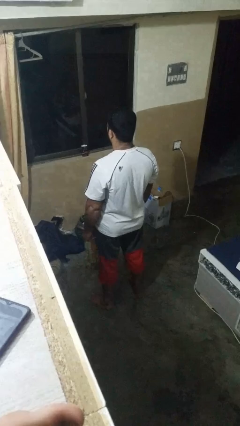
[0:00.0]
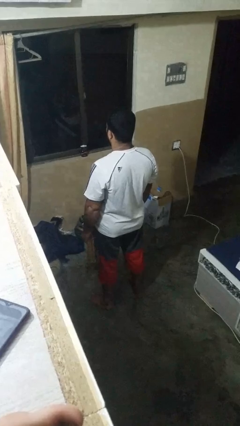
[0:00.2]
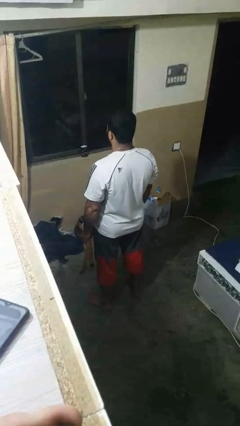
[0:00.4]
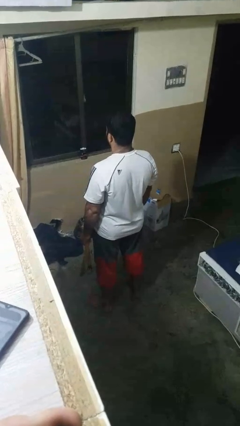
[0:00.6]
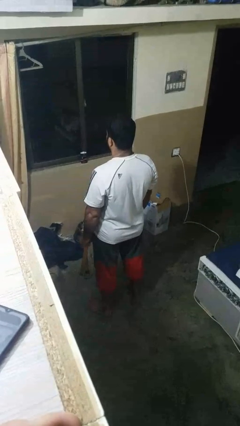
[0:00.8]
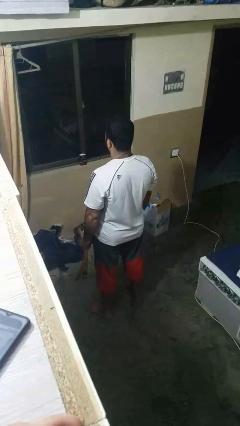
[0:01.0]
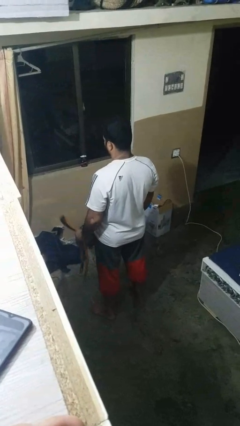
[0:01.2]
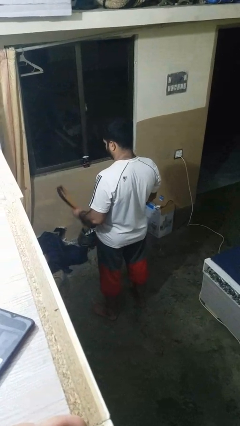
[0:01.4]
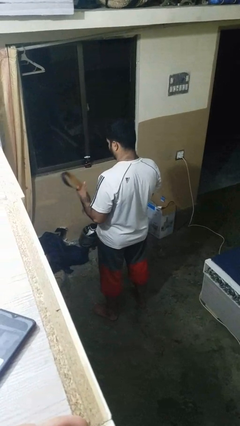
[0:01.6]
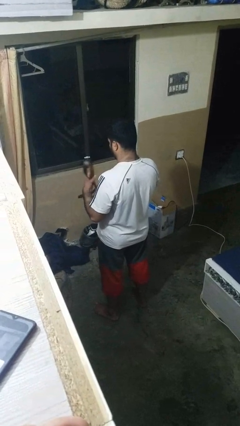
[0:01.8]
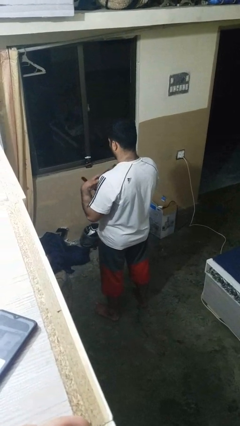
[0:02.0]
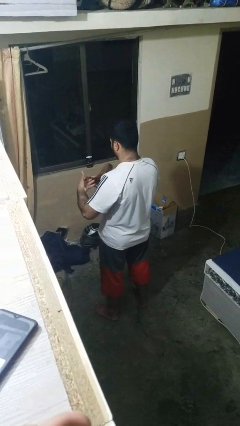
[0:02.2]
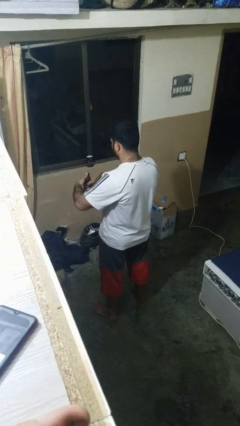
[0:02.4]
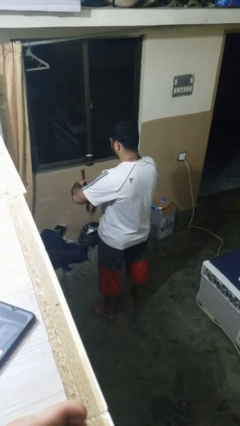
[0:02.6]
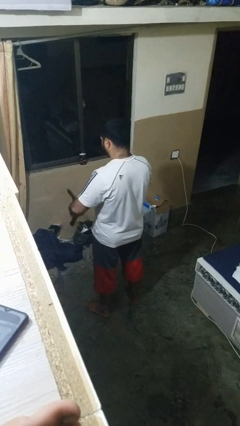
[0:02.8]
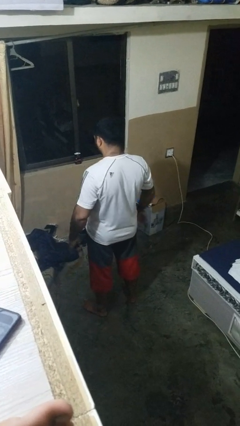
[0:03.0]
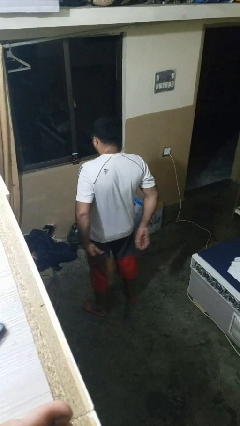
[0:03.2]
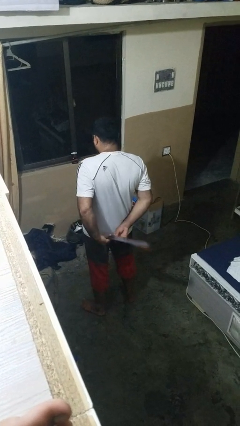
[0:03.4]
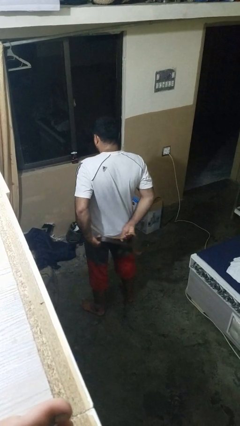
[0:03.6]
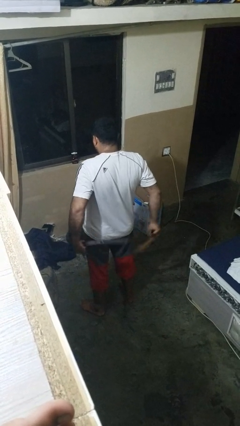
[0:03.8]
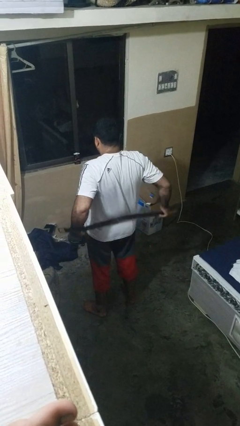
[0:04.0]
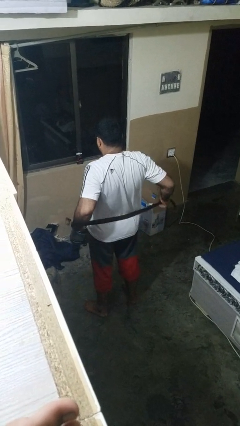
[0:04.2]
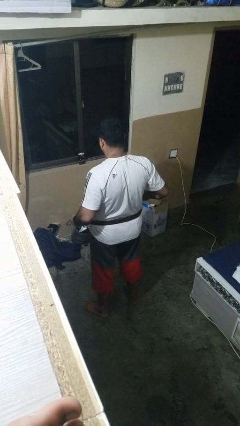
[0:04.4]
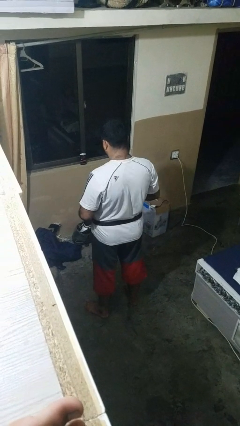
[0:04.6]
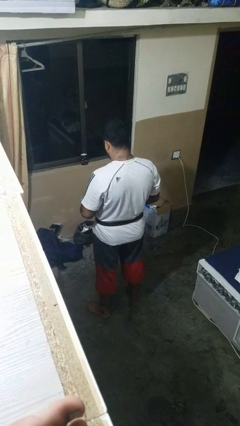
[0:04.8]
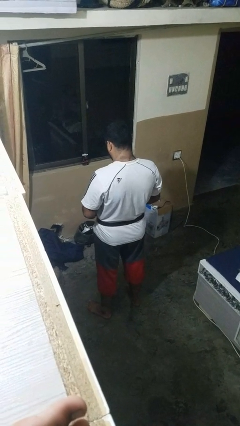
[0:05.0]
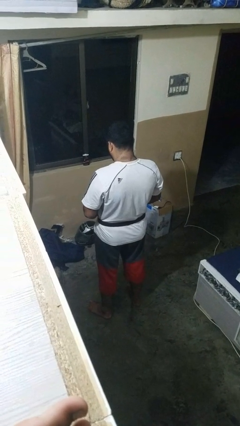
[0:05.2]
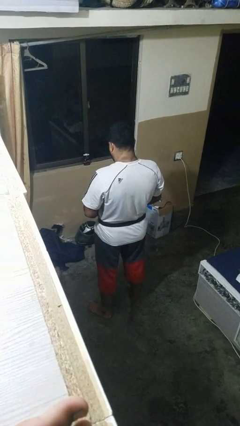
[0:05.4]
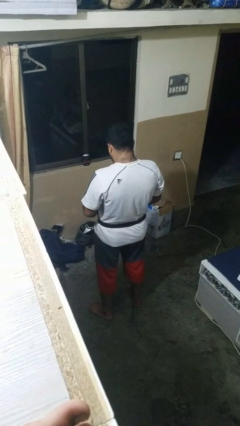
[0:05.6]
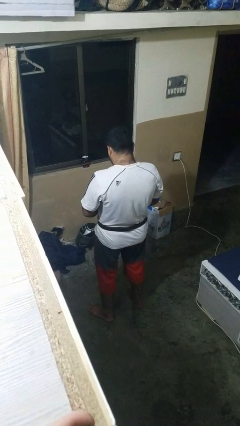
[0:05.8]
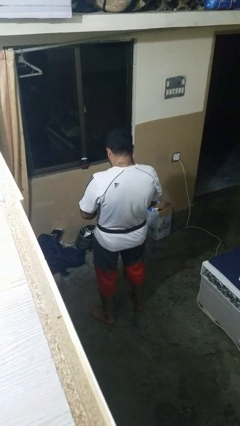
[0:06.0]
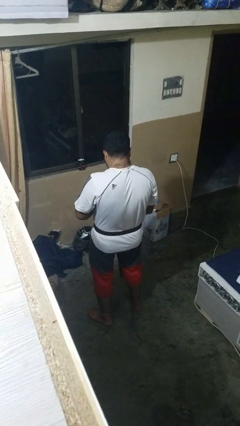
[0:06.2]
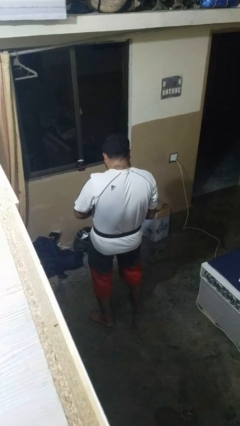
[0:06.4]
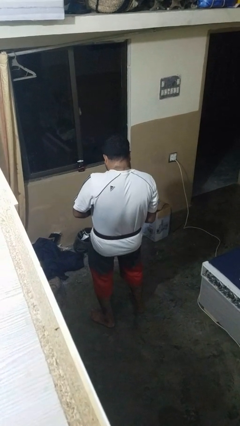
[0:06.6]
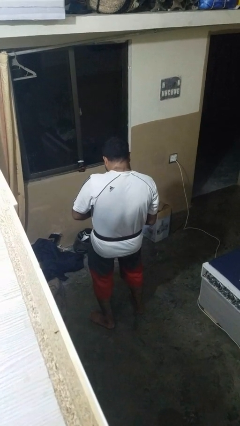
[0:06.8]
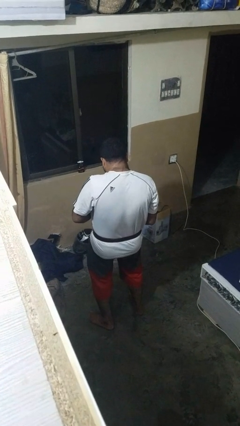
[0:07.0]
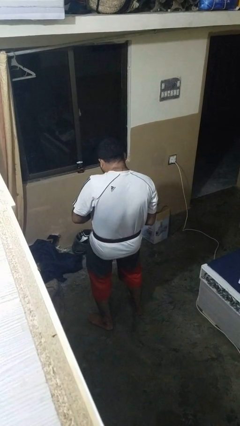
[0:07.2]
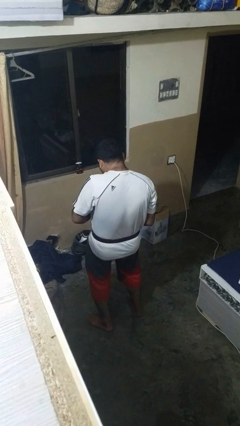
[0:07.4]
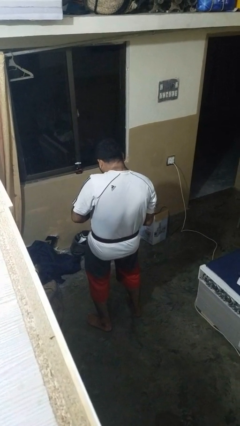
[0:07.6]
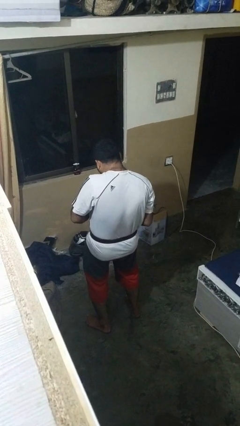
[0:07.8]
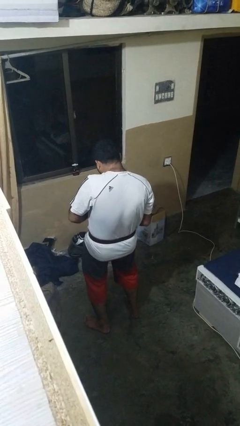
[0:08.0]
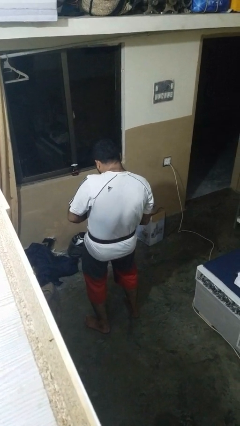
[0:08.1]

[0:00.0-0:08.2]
person puts on belt

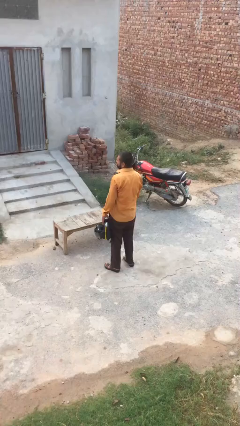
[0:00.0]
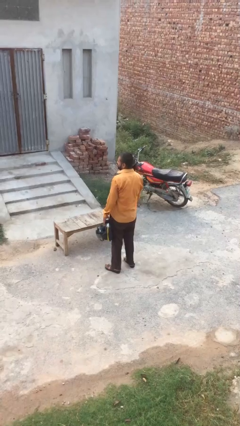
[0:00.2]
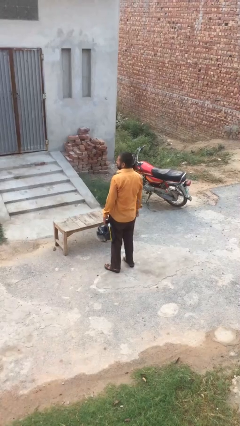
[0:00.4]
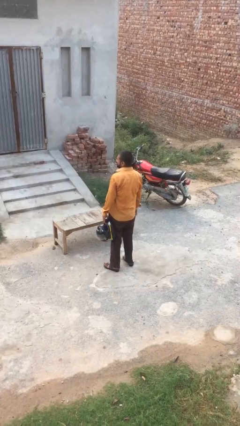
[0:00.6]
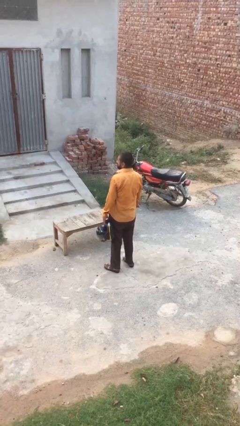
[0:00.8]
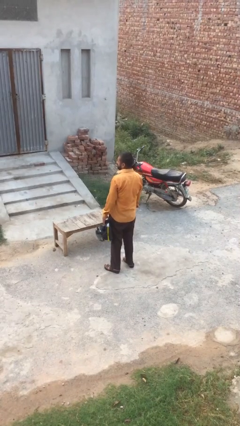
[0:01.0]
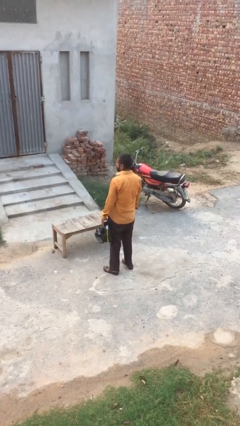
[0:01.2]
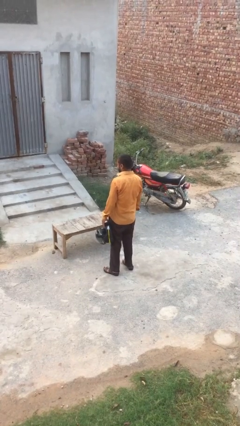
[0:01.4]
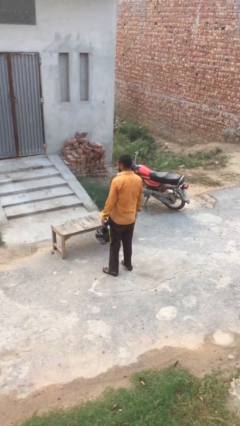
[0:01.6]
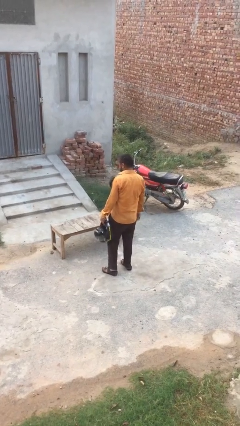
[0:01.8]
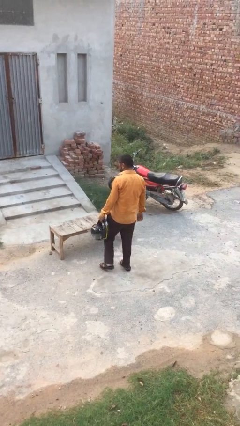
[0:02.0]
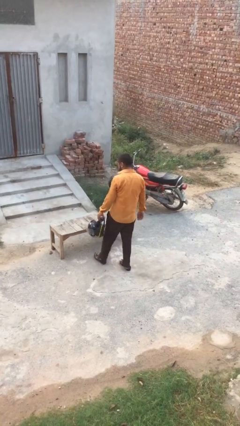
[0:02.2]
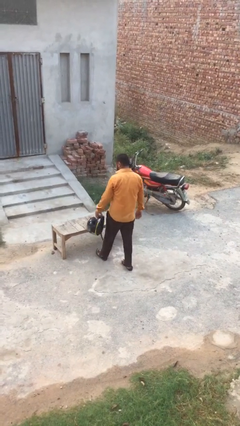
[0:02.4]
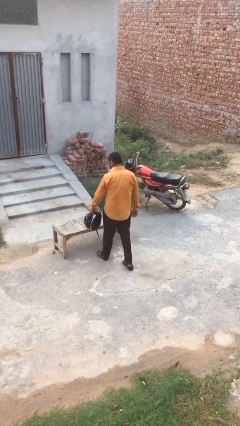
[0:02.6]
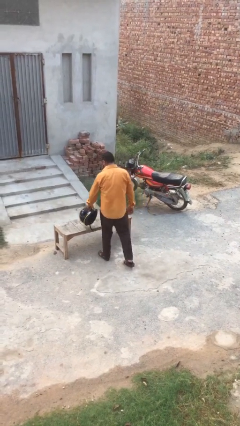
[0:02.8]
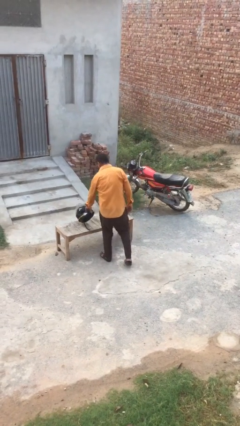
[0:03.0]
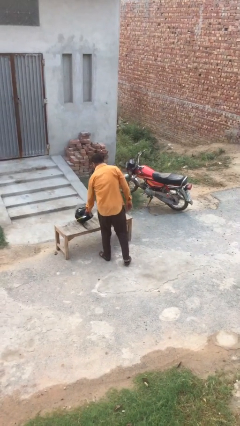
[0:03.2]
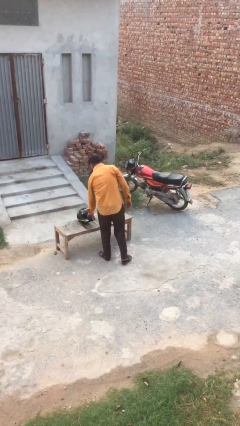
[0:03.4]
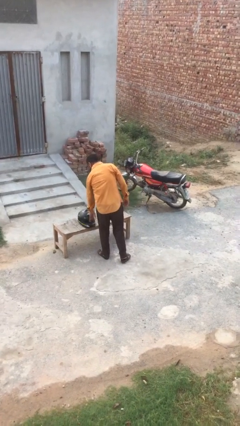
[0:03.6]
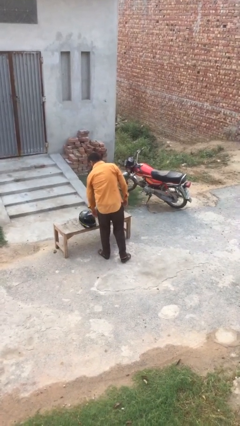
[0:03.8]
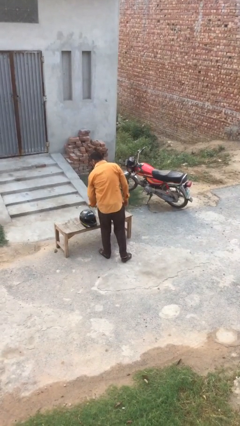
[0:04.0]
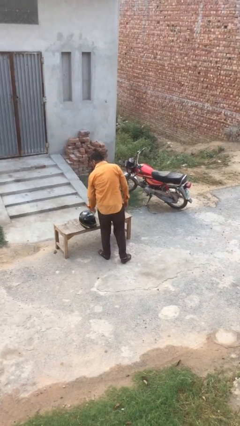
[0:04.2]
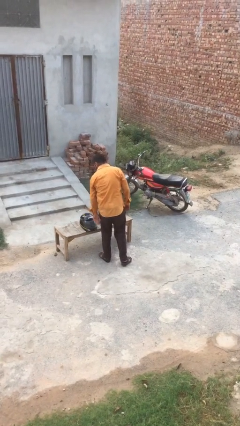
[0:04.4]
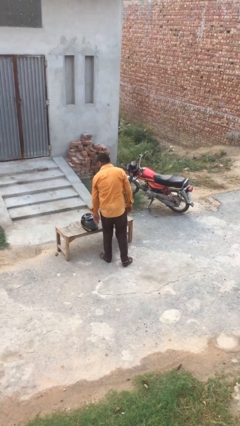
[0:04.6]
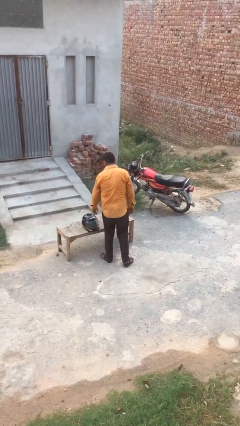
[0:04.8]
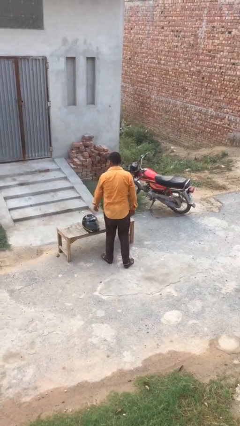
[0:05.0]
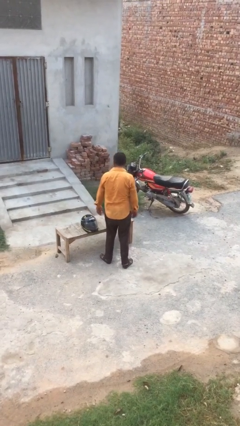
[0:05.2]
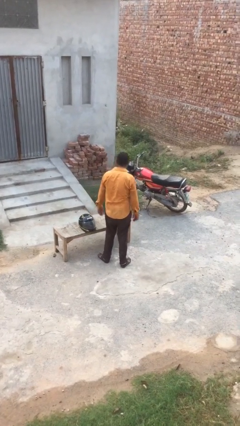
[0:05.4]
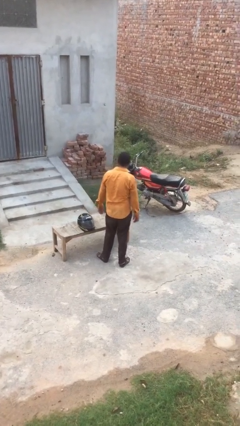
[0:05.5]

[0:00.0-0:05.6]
person puts down object on table

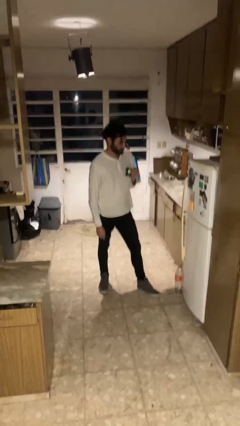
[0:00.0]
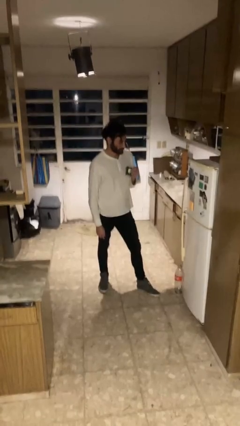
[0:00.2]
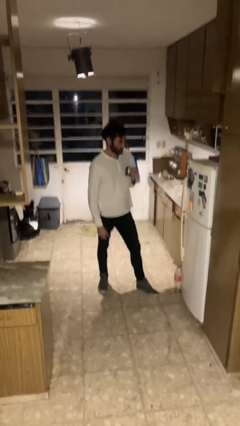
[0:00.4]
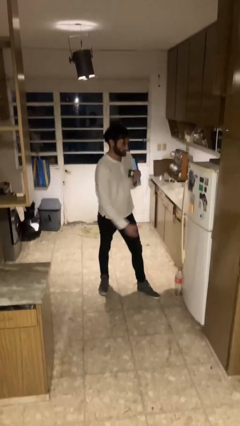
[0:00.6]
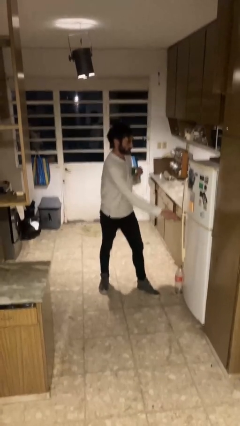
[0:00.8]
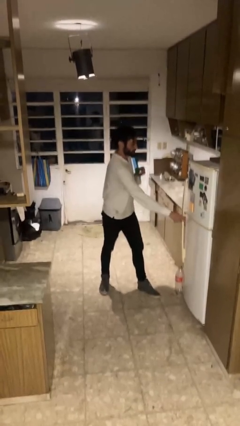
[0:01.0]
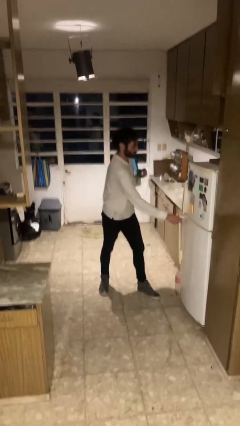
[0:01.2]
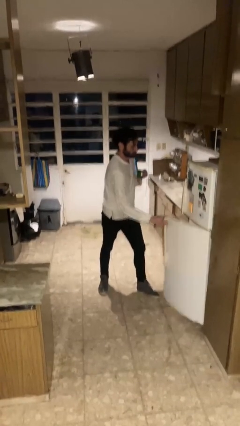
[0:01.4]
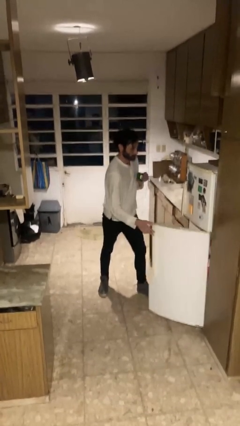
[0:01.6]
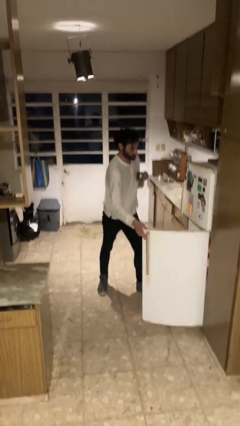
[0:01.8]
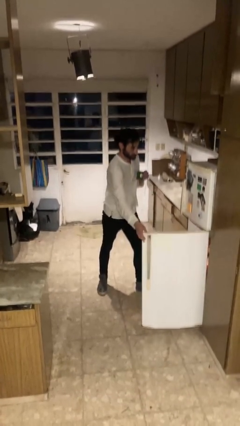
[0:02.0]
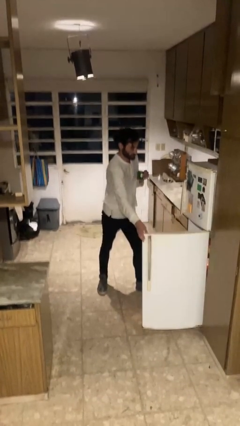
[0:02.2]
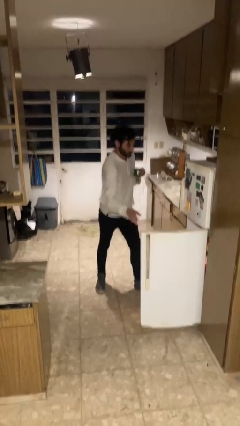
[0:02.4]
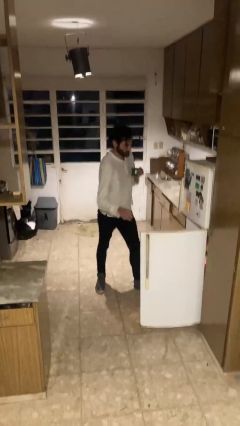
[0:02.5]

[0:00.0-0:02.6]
person opens refrigerator

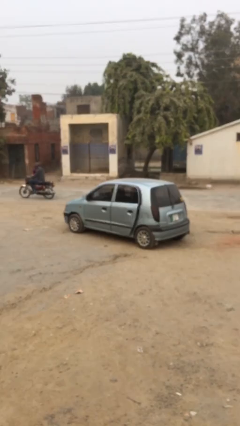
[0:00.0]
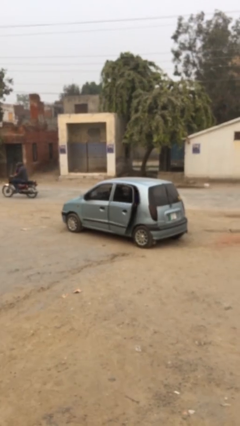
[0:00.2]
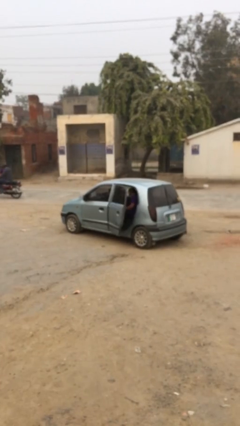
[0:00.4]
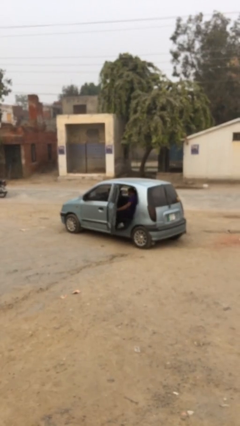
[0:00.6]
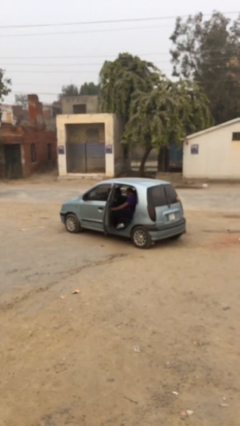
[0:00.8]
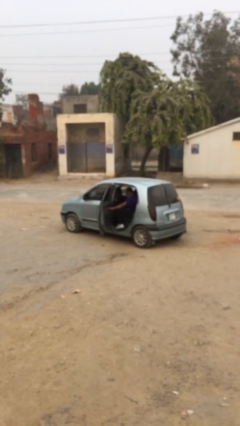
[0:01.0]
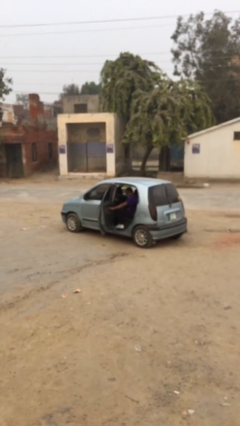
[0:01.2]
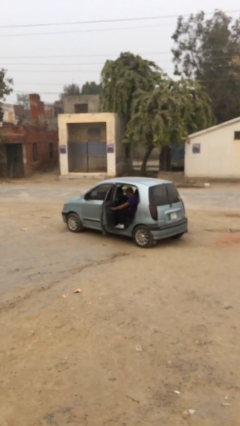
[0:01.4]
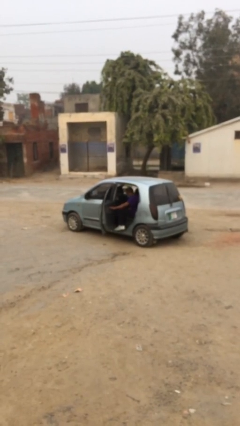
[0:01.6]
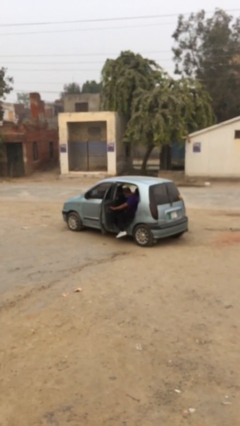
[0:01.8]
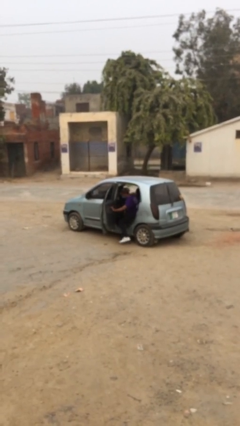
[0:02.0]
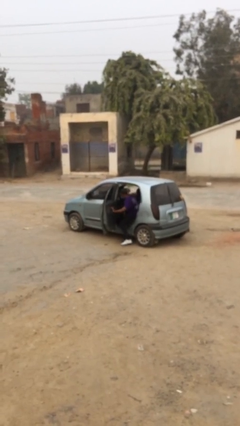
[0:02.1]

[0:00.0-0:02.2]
person opens car door
